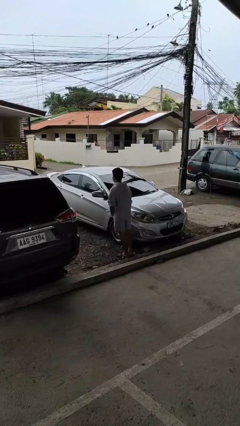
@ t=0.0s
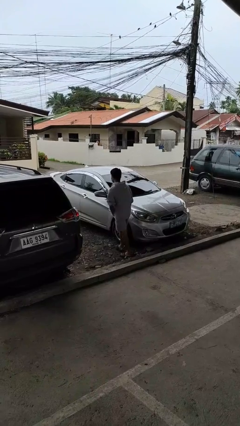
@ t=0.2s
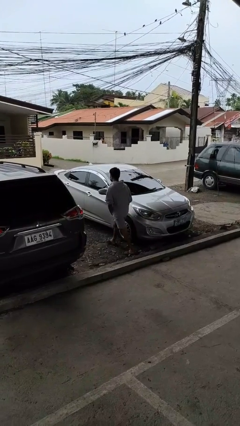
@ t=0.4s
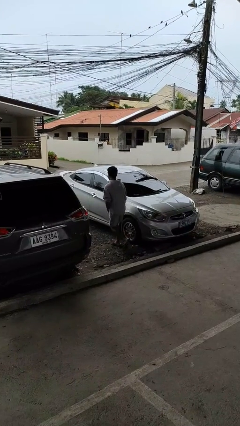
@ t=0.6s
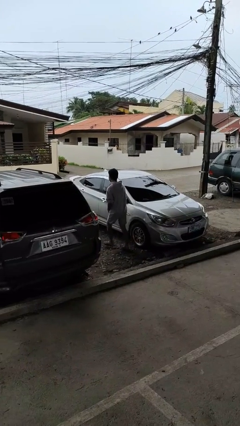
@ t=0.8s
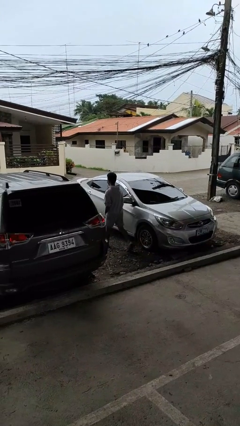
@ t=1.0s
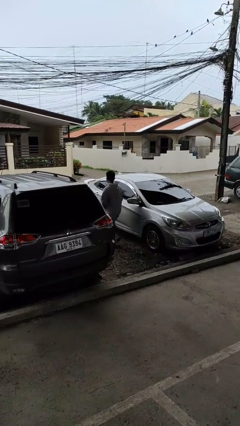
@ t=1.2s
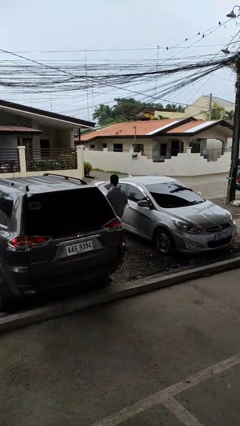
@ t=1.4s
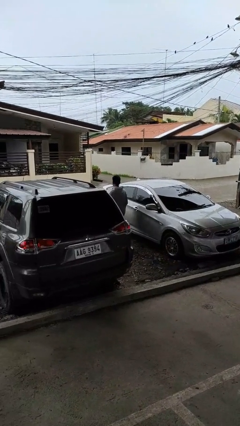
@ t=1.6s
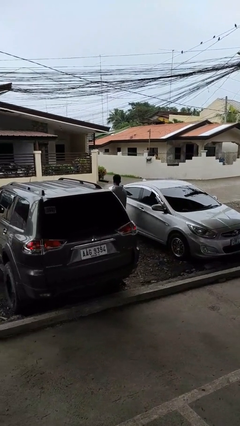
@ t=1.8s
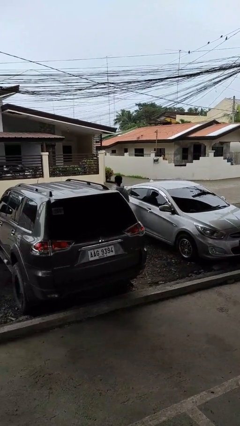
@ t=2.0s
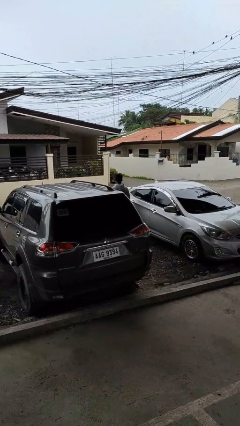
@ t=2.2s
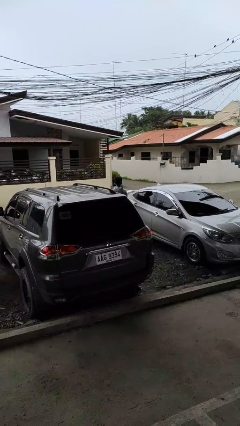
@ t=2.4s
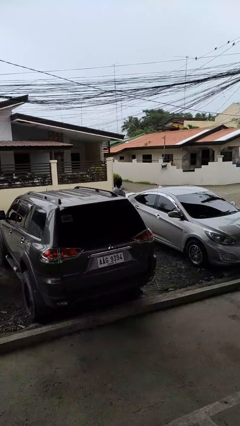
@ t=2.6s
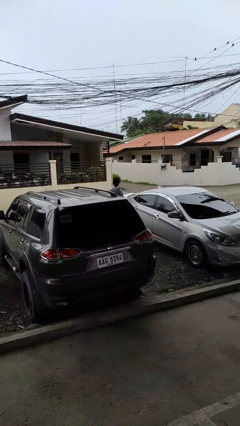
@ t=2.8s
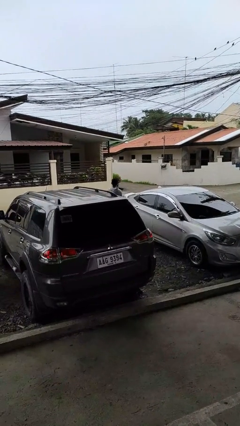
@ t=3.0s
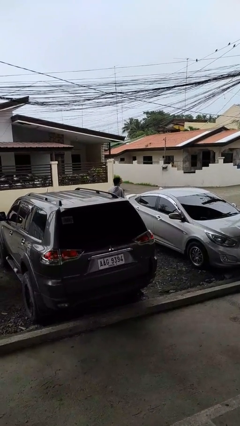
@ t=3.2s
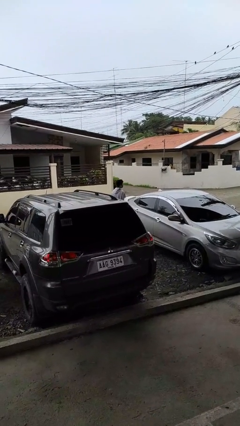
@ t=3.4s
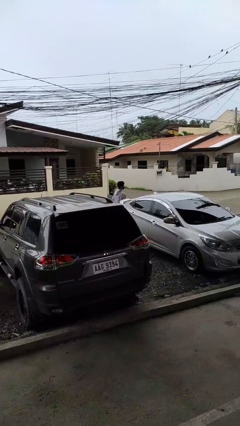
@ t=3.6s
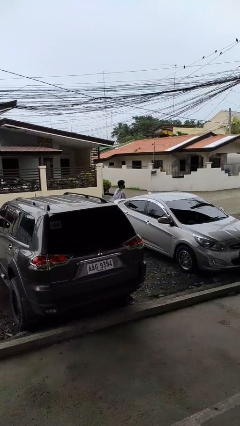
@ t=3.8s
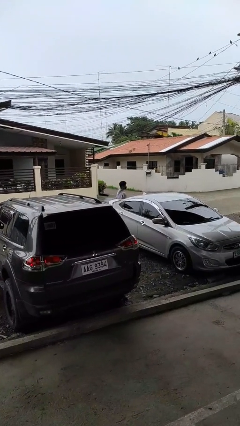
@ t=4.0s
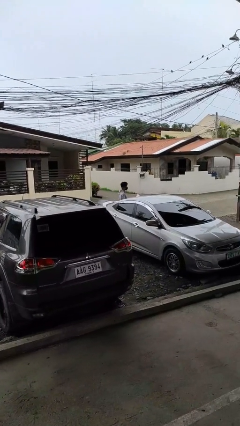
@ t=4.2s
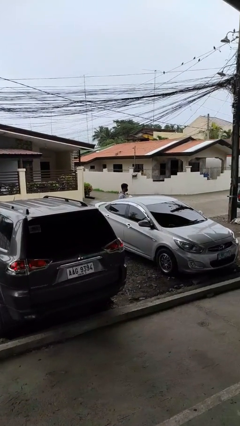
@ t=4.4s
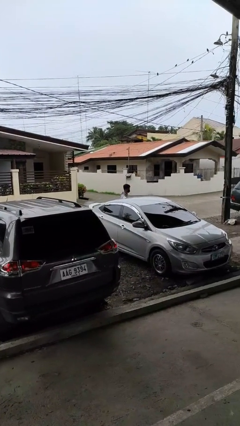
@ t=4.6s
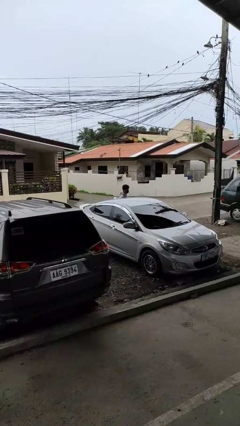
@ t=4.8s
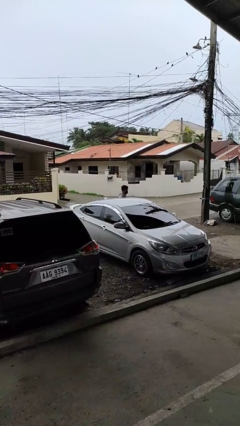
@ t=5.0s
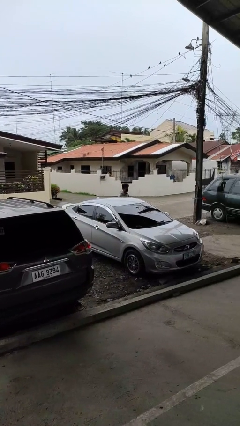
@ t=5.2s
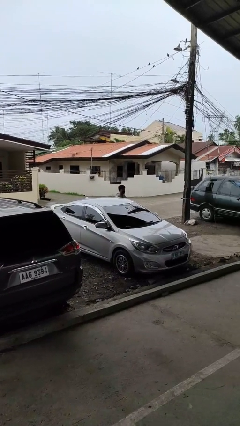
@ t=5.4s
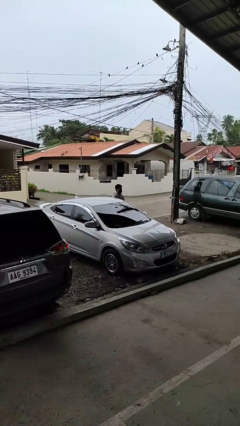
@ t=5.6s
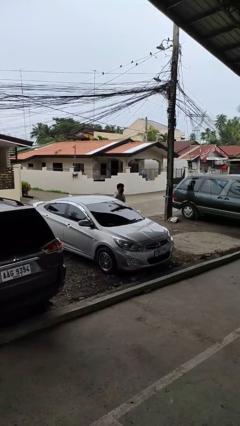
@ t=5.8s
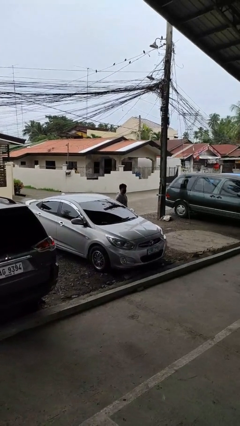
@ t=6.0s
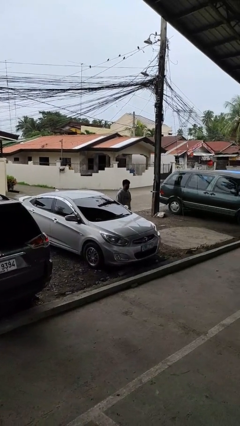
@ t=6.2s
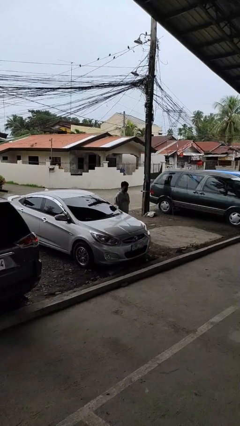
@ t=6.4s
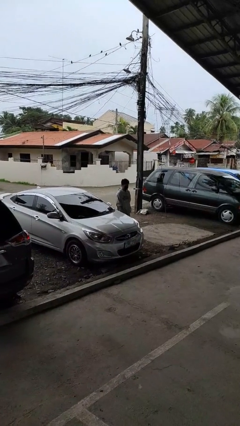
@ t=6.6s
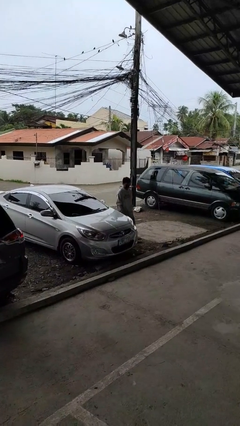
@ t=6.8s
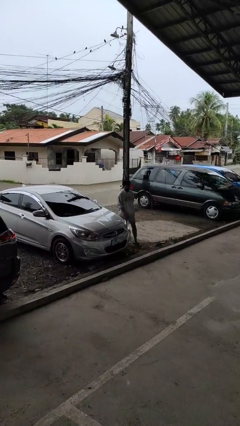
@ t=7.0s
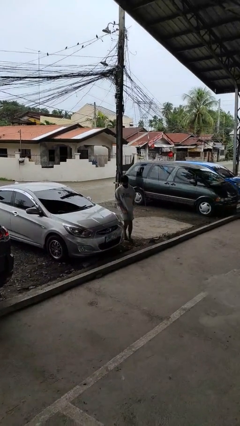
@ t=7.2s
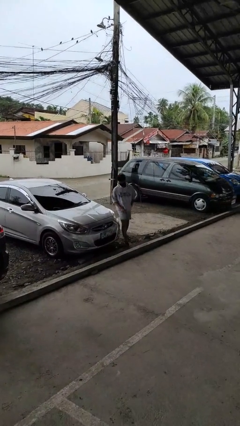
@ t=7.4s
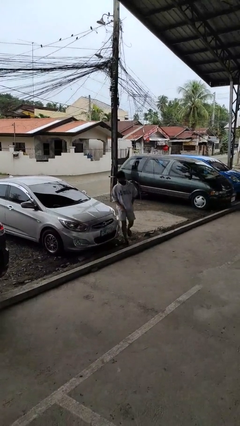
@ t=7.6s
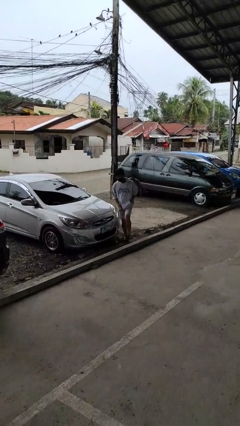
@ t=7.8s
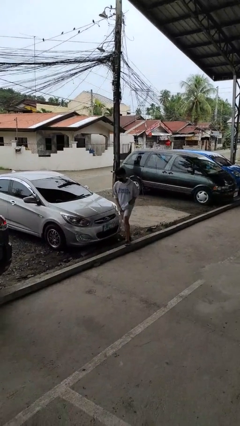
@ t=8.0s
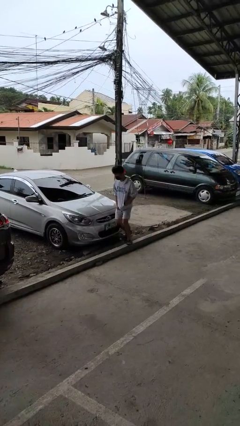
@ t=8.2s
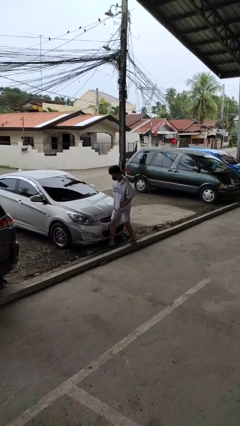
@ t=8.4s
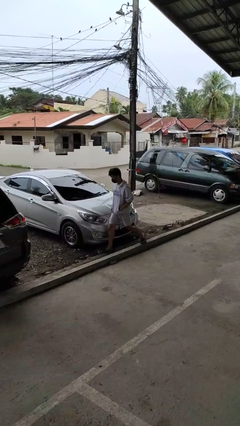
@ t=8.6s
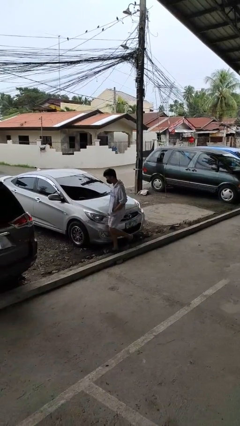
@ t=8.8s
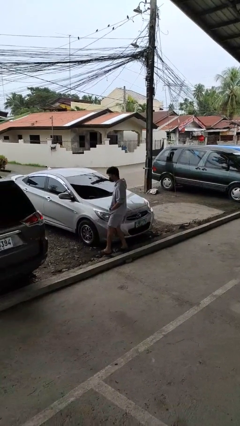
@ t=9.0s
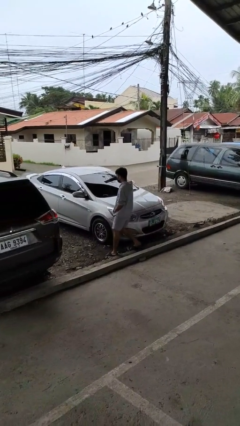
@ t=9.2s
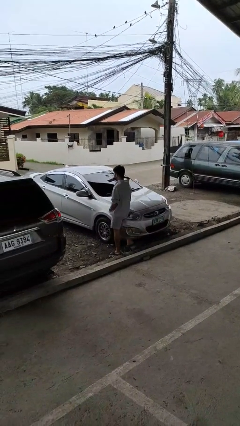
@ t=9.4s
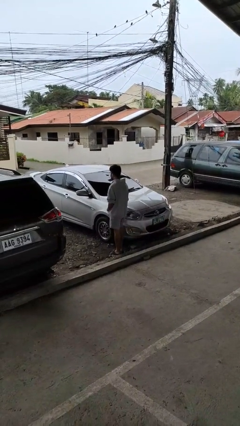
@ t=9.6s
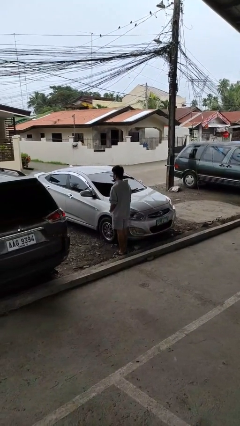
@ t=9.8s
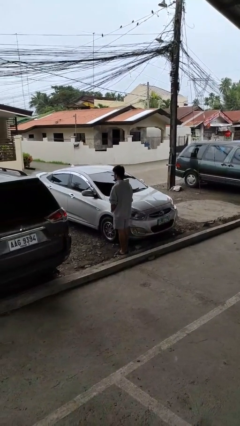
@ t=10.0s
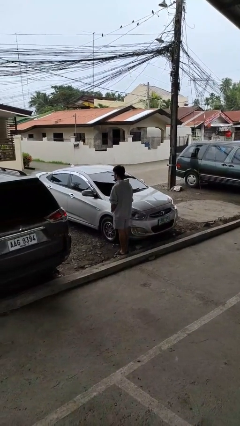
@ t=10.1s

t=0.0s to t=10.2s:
person walks around car

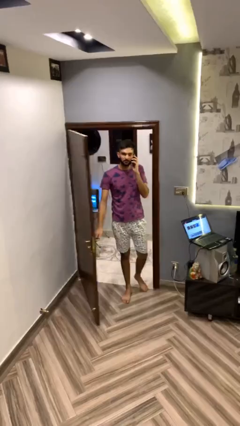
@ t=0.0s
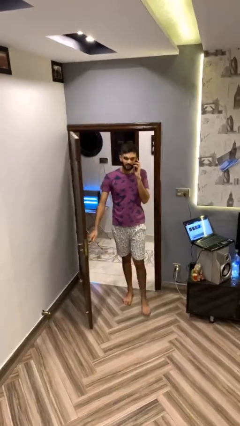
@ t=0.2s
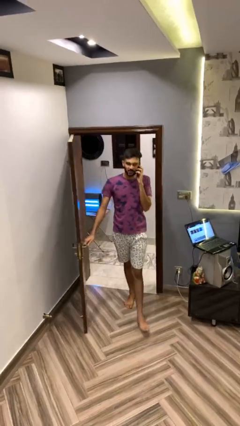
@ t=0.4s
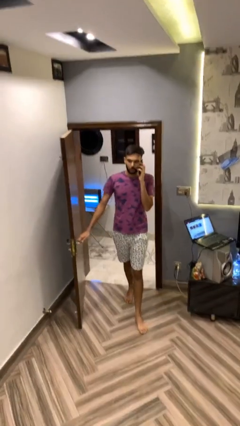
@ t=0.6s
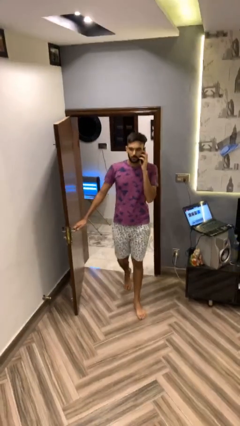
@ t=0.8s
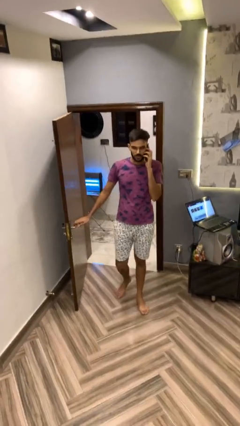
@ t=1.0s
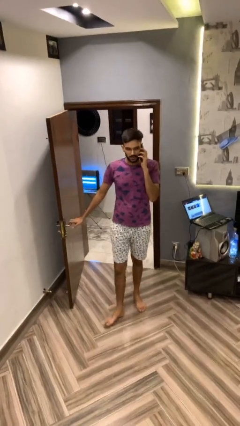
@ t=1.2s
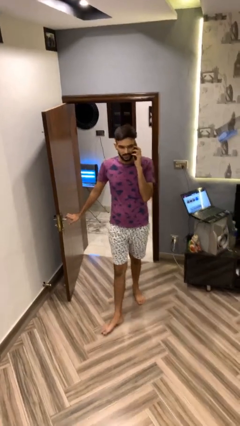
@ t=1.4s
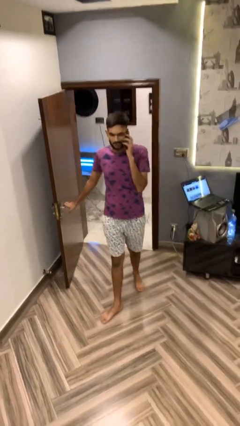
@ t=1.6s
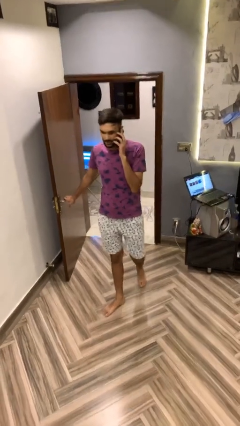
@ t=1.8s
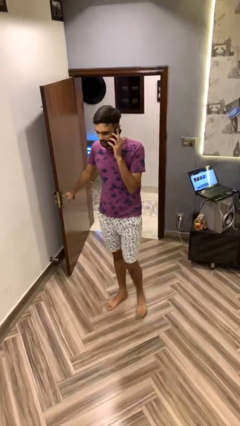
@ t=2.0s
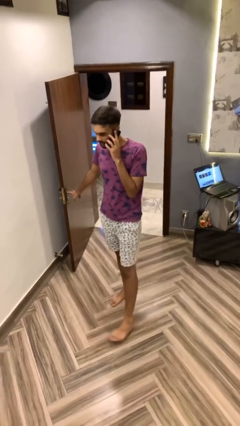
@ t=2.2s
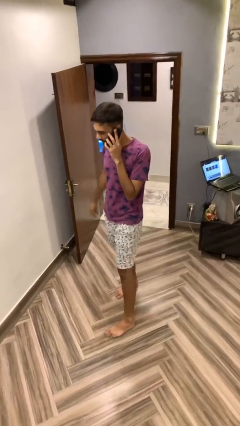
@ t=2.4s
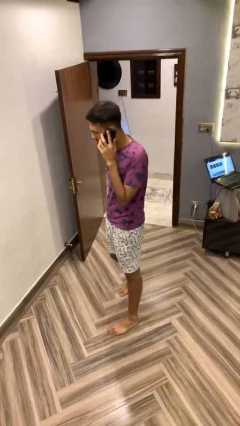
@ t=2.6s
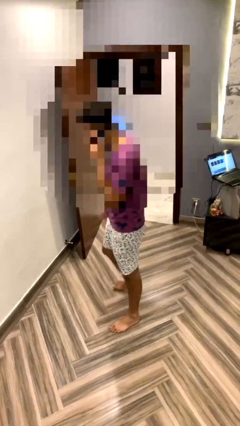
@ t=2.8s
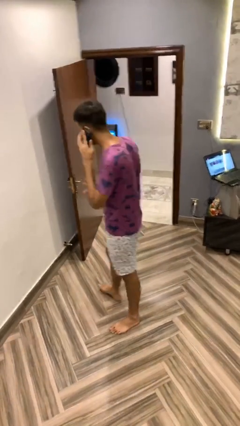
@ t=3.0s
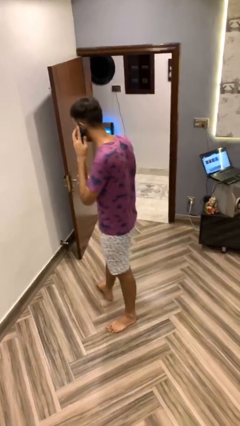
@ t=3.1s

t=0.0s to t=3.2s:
person enters scene through structure

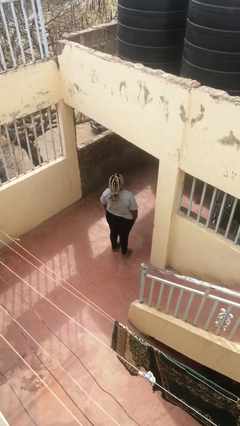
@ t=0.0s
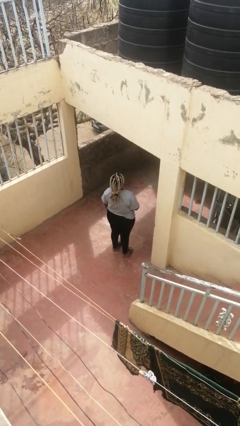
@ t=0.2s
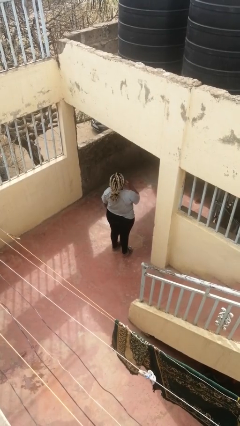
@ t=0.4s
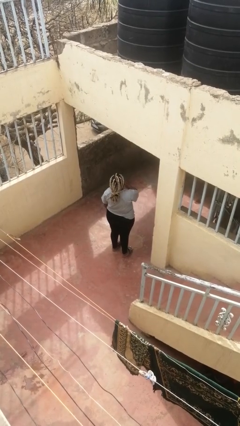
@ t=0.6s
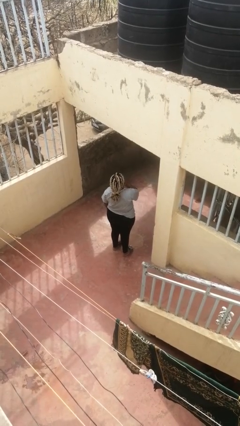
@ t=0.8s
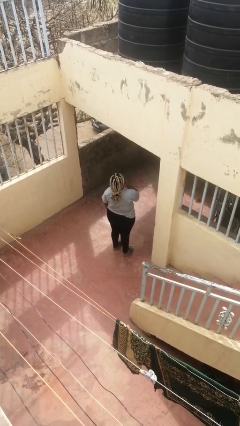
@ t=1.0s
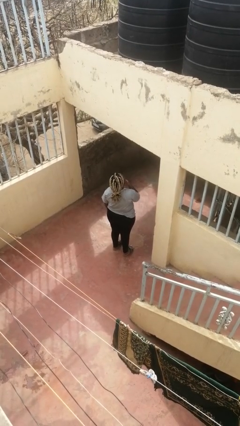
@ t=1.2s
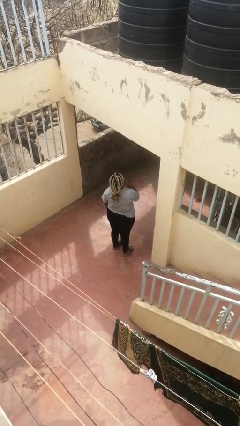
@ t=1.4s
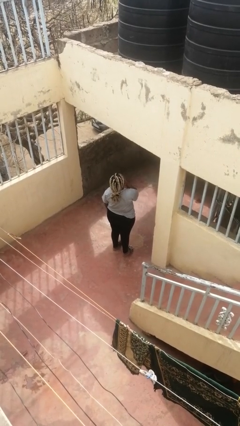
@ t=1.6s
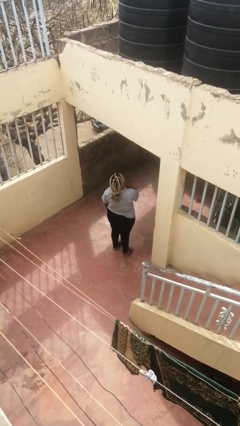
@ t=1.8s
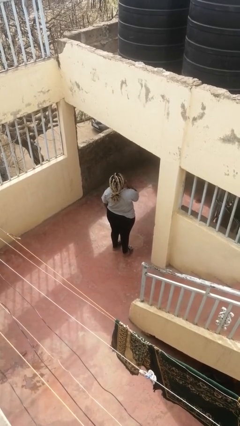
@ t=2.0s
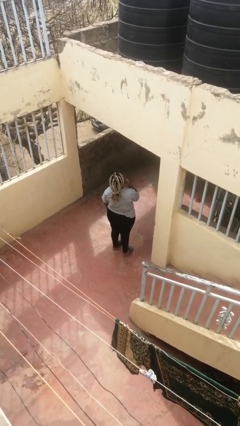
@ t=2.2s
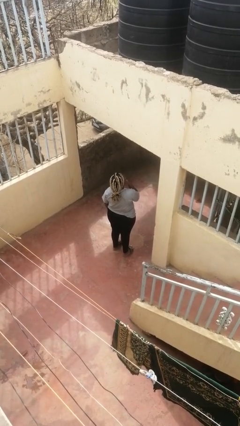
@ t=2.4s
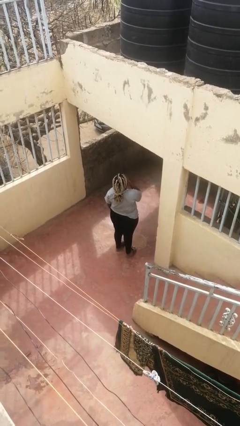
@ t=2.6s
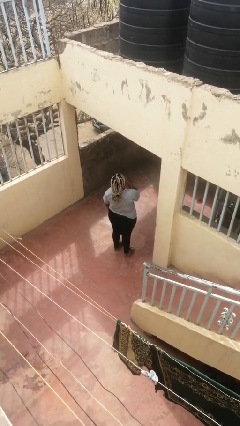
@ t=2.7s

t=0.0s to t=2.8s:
person strokes chin

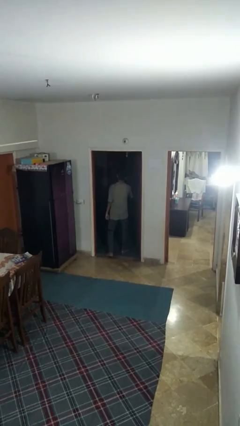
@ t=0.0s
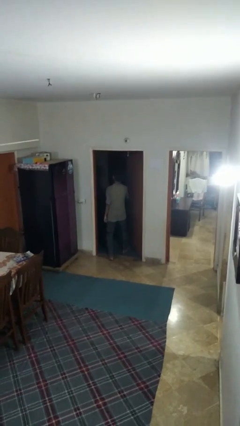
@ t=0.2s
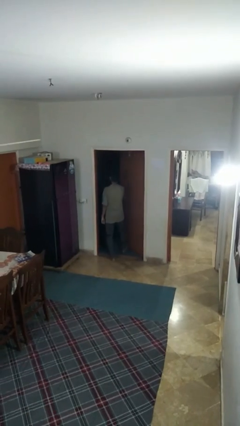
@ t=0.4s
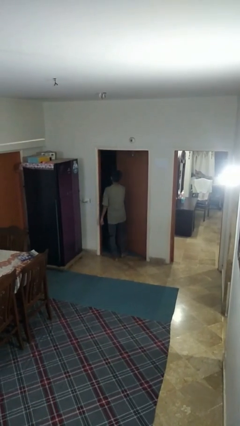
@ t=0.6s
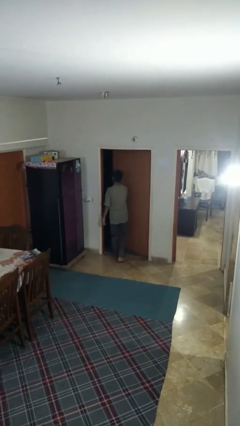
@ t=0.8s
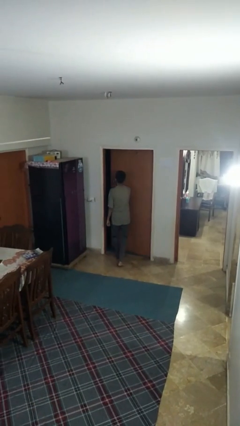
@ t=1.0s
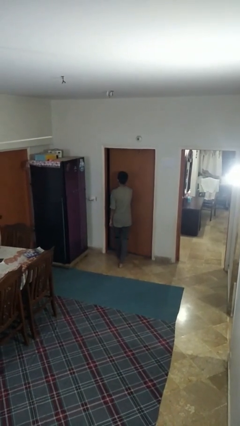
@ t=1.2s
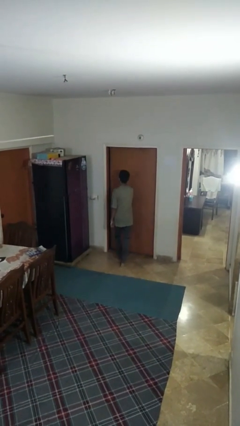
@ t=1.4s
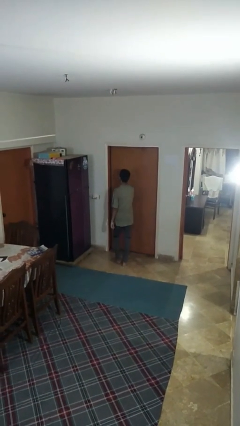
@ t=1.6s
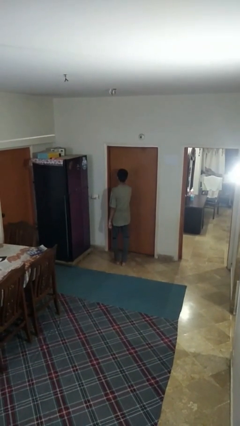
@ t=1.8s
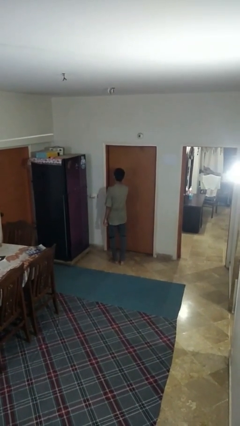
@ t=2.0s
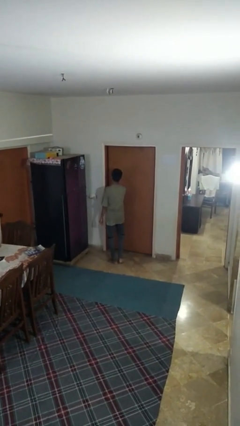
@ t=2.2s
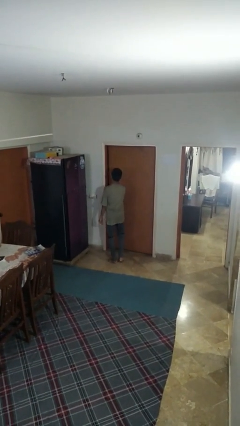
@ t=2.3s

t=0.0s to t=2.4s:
person closes facility door
